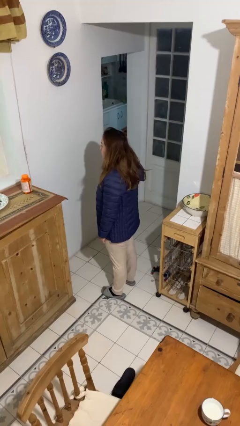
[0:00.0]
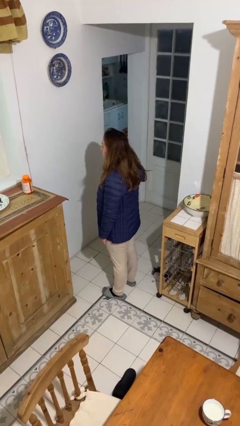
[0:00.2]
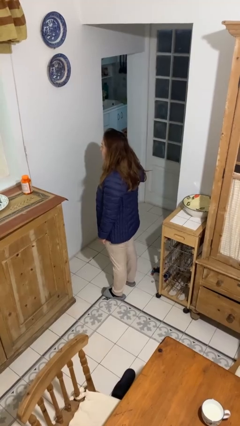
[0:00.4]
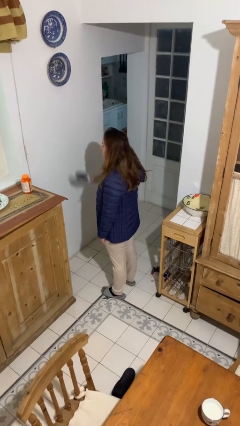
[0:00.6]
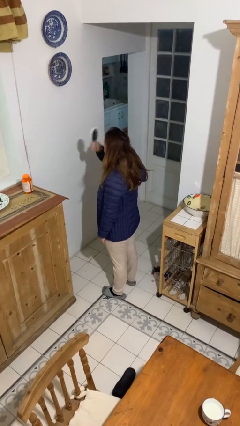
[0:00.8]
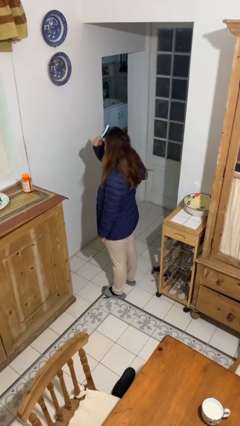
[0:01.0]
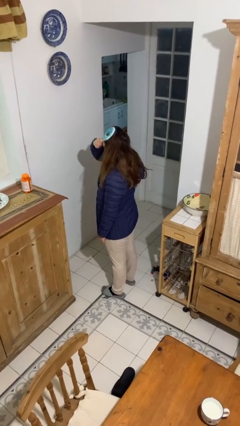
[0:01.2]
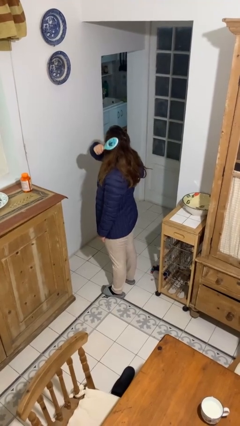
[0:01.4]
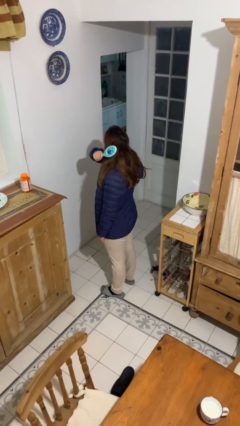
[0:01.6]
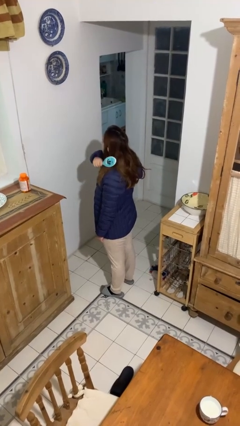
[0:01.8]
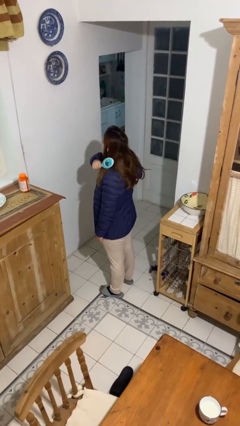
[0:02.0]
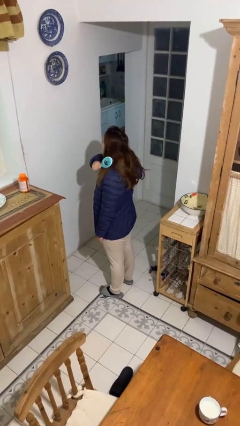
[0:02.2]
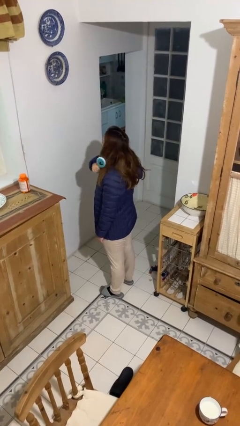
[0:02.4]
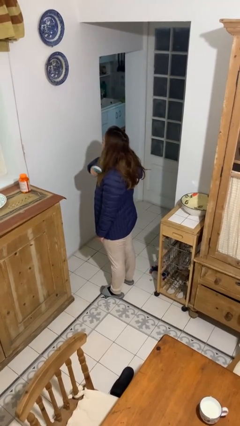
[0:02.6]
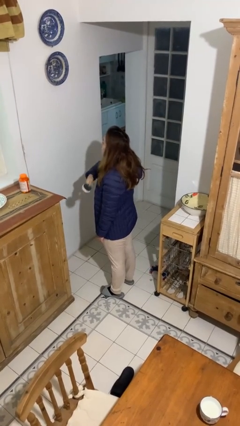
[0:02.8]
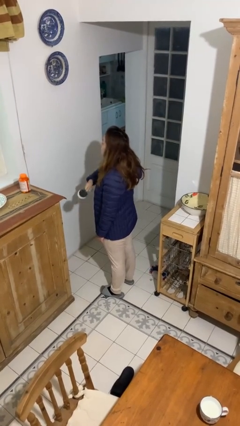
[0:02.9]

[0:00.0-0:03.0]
person brushes hair

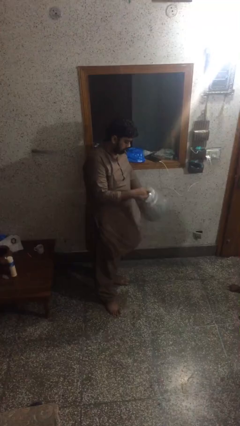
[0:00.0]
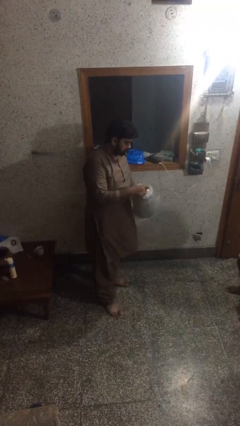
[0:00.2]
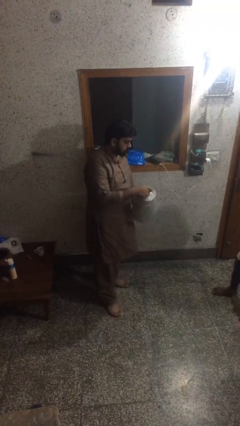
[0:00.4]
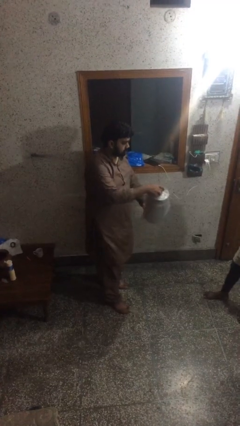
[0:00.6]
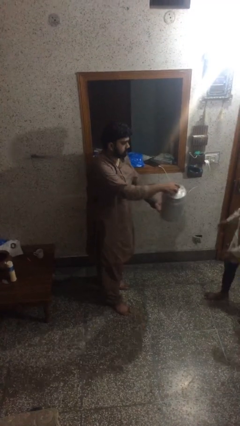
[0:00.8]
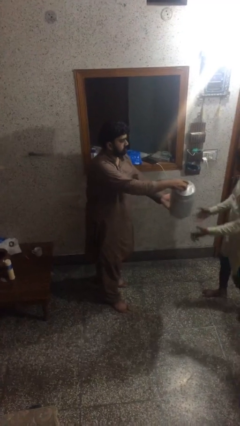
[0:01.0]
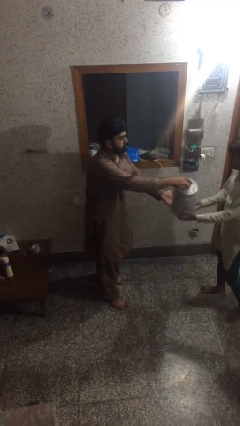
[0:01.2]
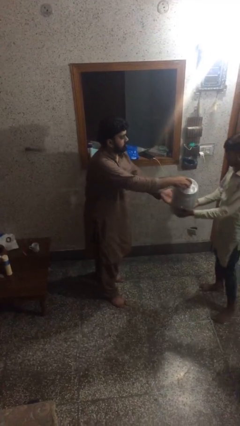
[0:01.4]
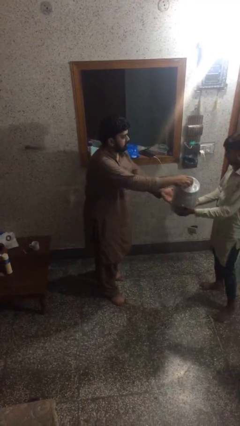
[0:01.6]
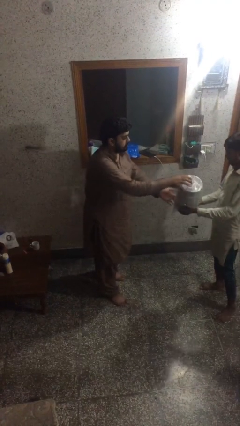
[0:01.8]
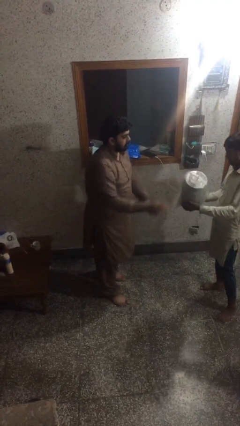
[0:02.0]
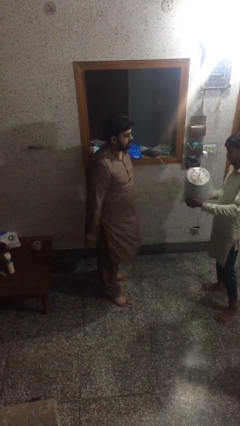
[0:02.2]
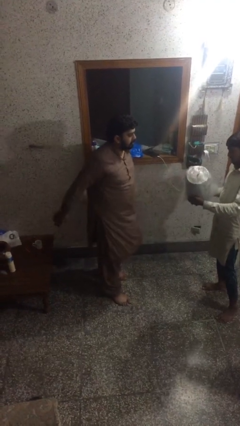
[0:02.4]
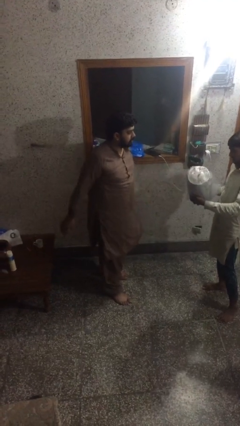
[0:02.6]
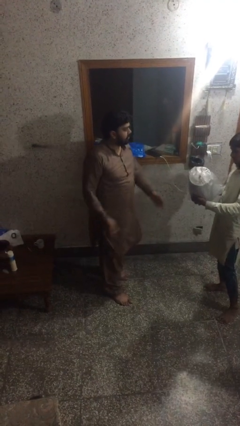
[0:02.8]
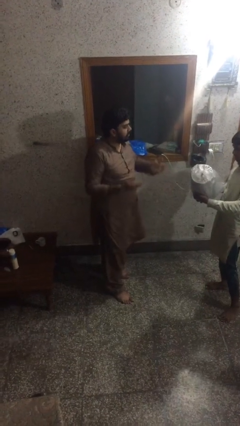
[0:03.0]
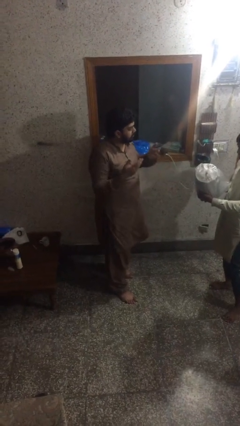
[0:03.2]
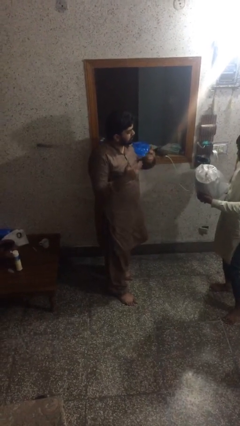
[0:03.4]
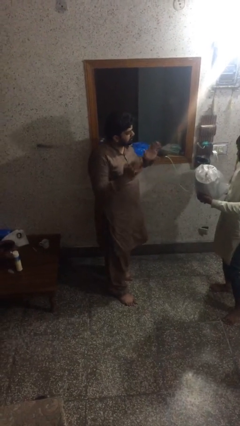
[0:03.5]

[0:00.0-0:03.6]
person transfers object to person

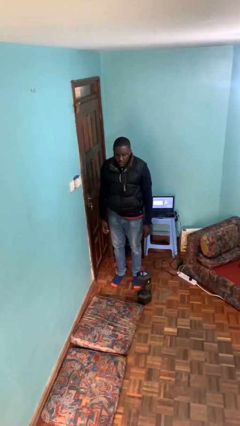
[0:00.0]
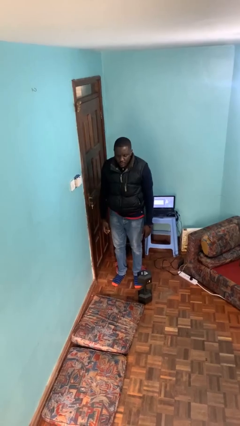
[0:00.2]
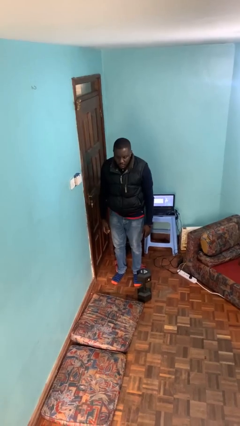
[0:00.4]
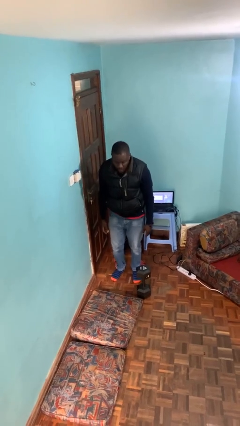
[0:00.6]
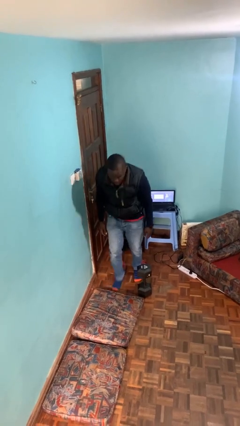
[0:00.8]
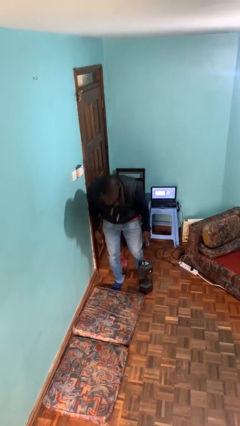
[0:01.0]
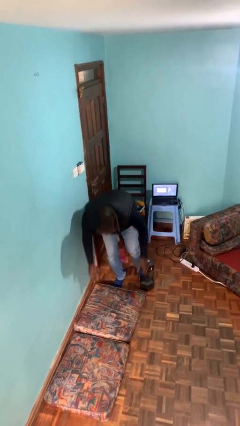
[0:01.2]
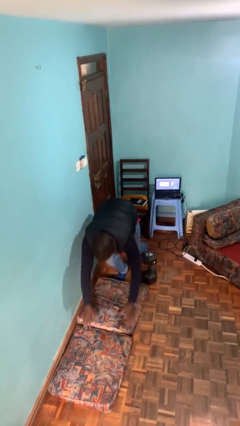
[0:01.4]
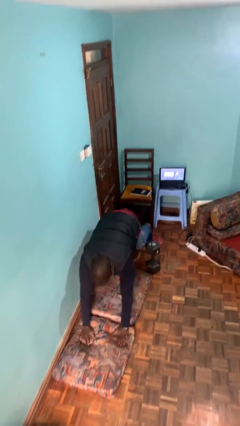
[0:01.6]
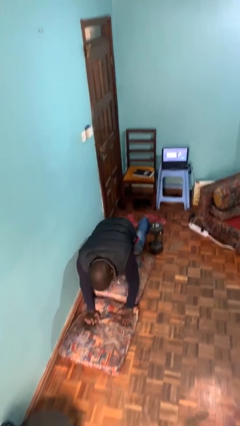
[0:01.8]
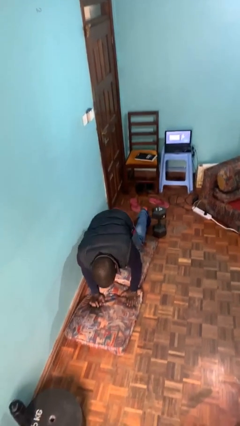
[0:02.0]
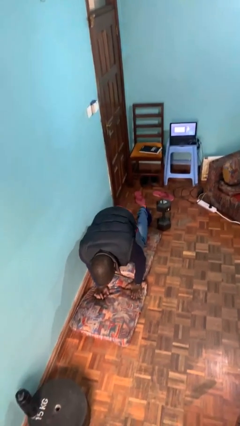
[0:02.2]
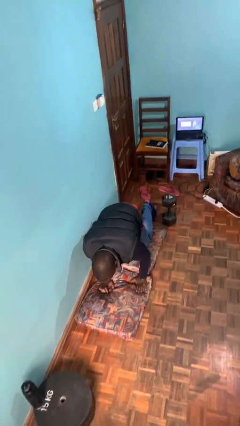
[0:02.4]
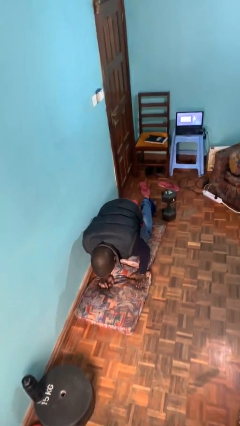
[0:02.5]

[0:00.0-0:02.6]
person trips on object on floor

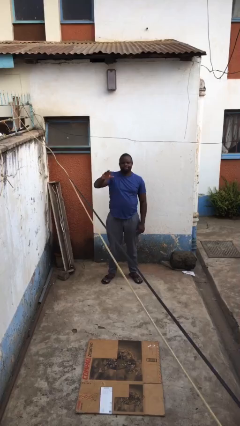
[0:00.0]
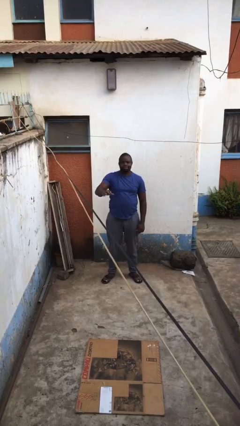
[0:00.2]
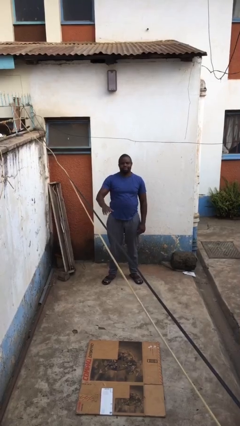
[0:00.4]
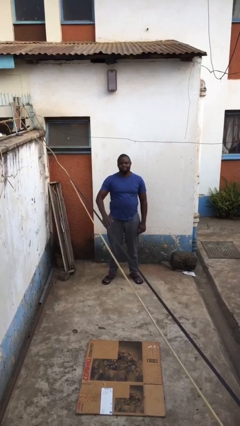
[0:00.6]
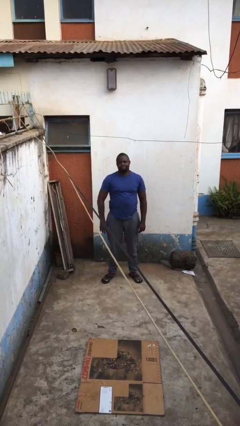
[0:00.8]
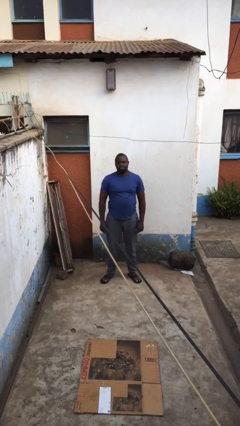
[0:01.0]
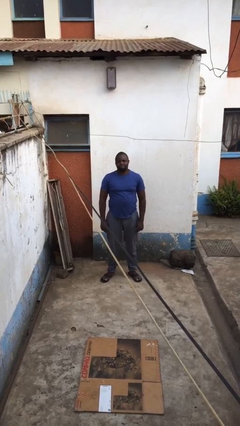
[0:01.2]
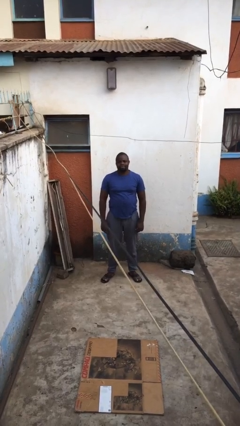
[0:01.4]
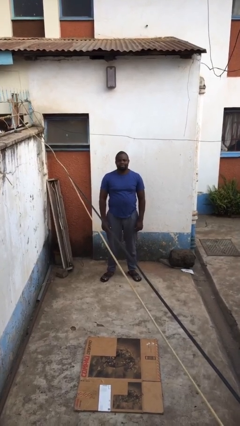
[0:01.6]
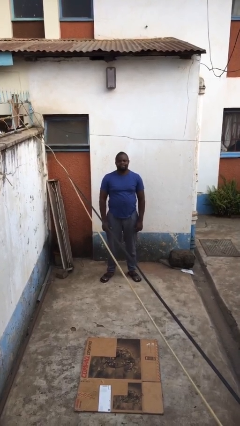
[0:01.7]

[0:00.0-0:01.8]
person gestures lower hand

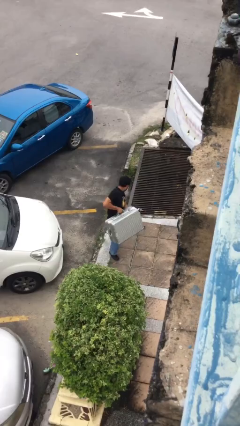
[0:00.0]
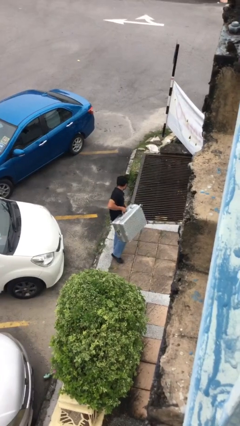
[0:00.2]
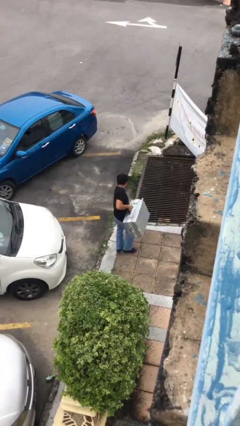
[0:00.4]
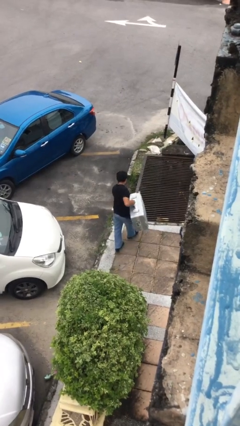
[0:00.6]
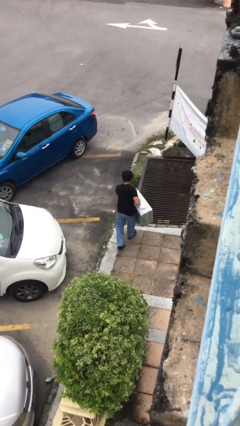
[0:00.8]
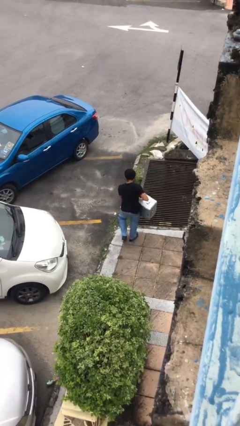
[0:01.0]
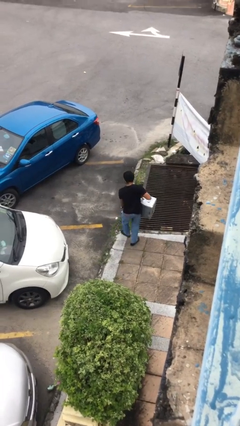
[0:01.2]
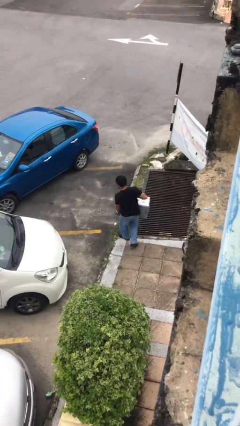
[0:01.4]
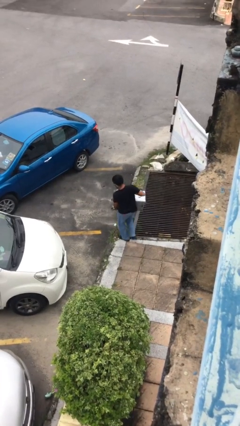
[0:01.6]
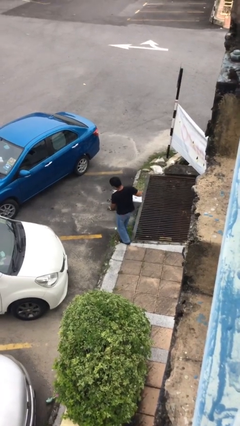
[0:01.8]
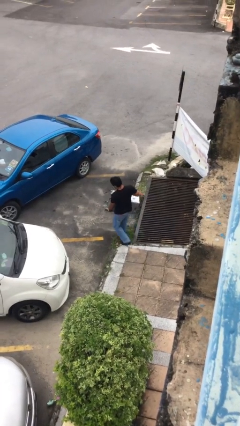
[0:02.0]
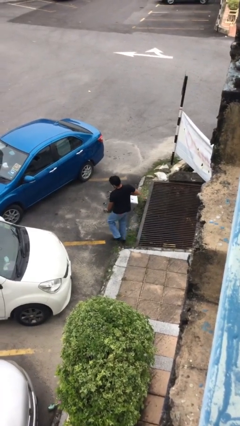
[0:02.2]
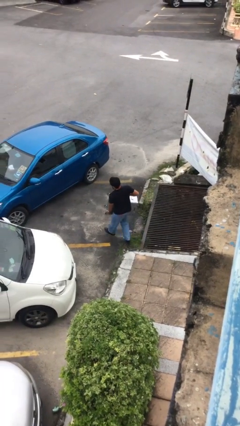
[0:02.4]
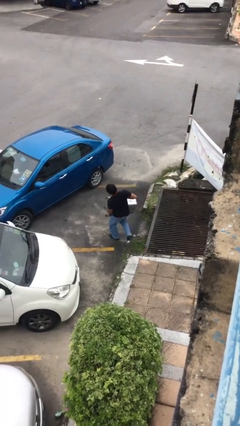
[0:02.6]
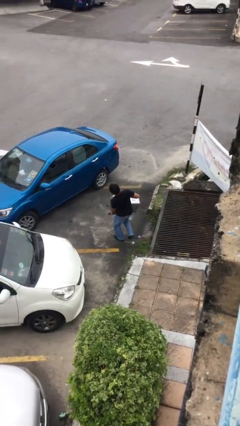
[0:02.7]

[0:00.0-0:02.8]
person carries heavy object

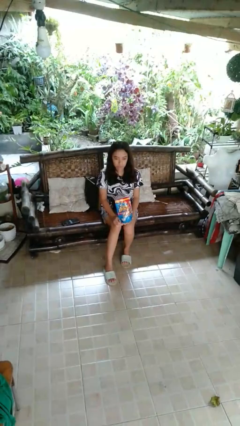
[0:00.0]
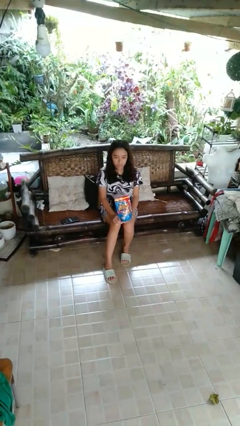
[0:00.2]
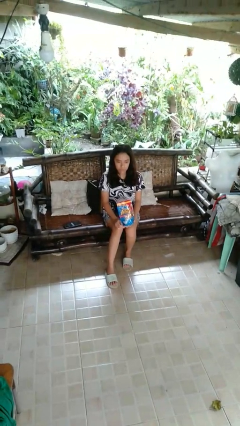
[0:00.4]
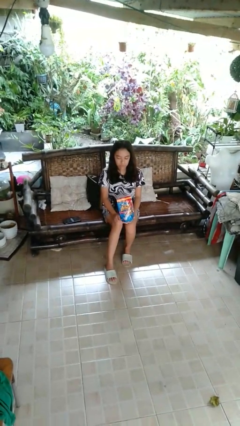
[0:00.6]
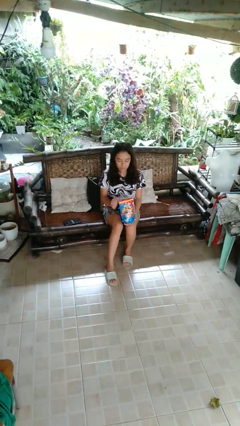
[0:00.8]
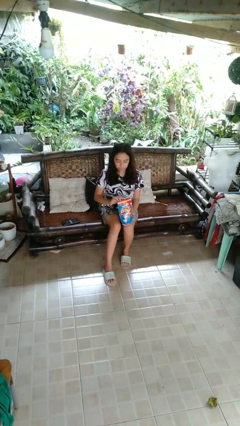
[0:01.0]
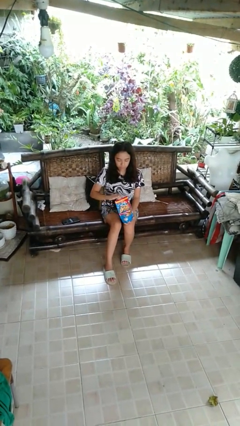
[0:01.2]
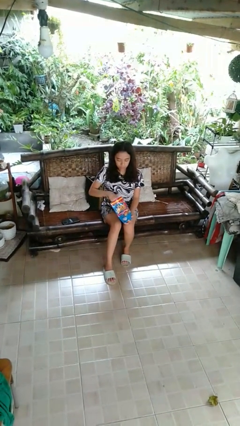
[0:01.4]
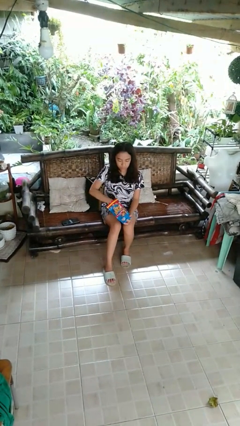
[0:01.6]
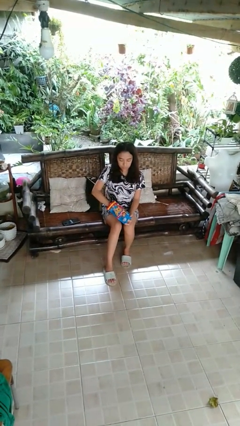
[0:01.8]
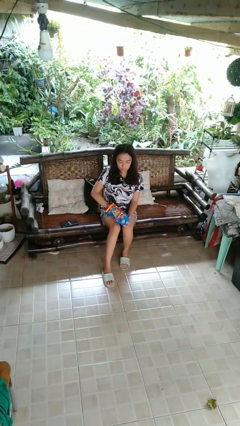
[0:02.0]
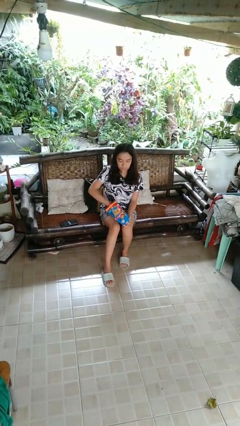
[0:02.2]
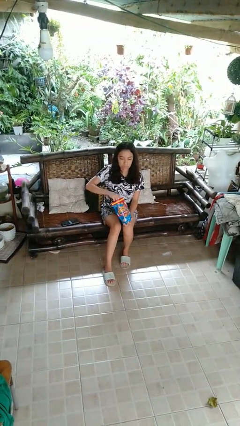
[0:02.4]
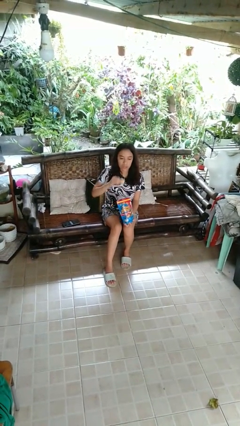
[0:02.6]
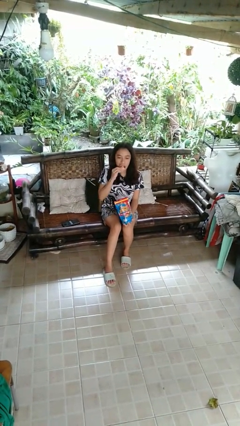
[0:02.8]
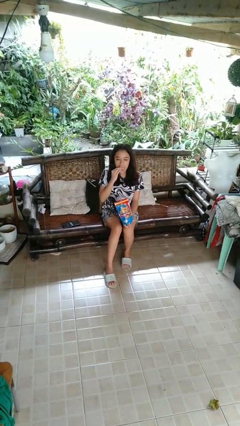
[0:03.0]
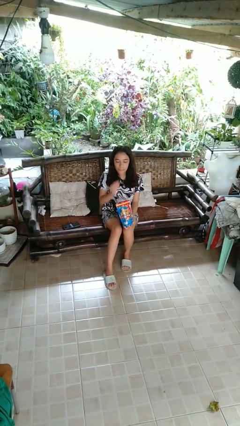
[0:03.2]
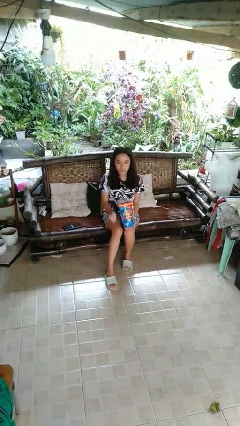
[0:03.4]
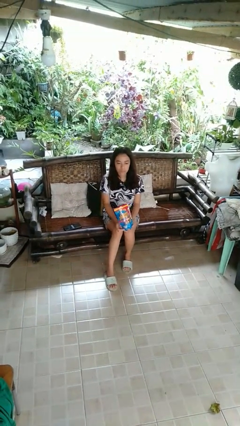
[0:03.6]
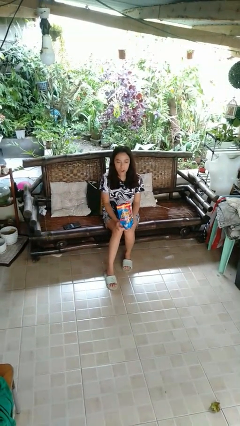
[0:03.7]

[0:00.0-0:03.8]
person eats snack from bag

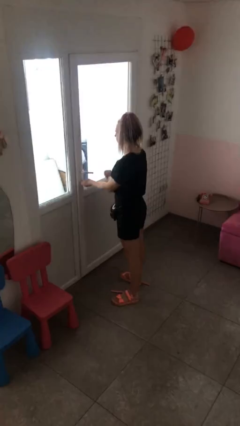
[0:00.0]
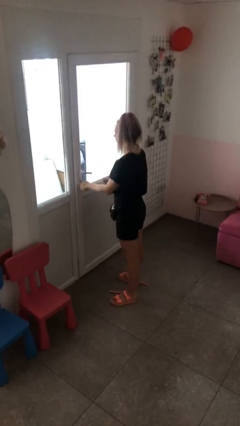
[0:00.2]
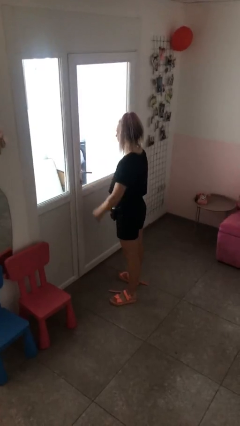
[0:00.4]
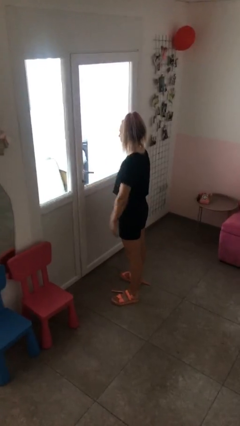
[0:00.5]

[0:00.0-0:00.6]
person locks door with keys
